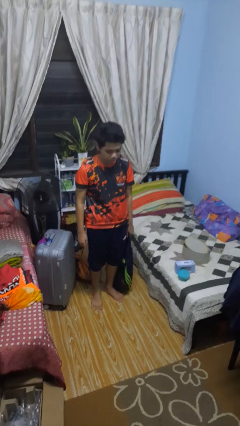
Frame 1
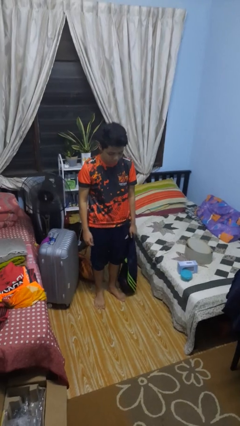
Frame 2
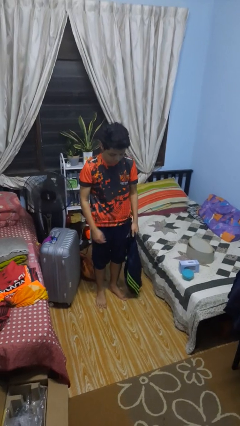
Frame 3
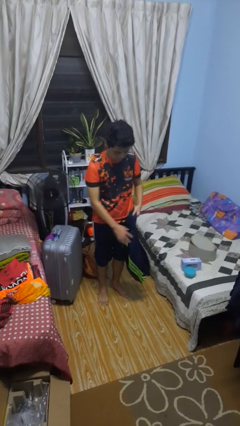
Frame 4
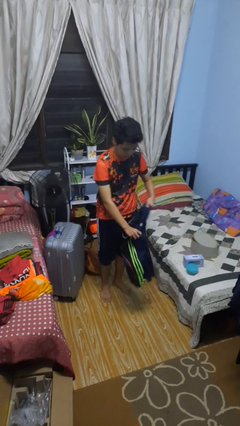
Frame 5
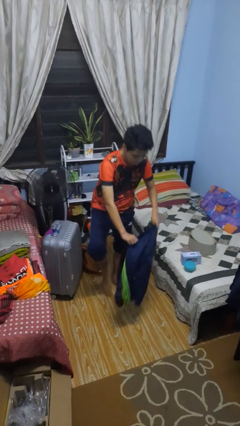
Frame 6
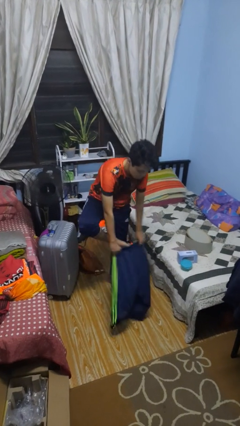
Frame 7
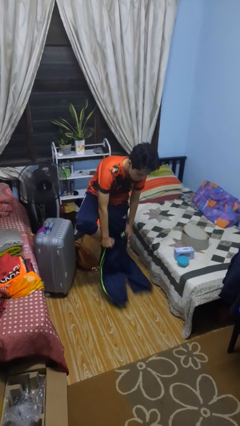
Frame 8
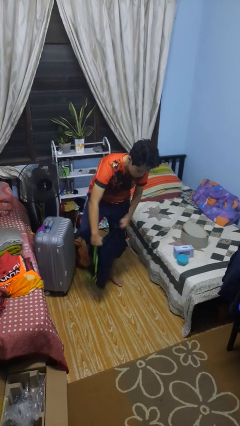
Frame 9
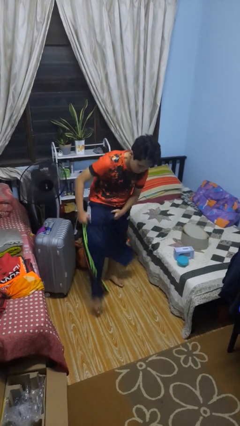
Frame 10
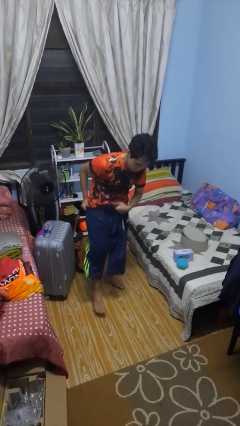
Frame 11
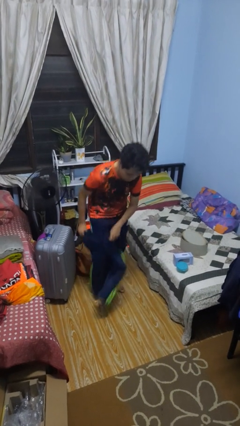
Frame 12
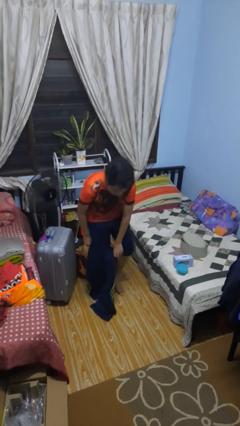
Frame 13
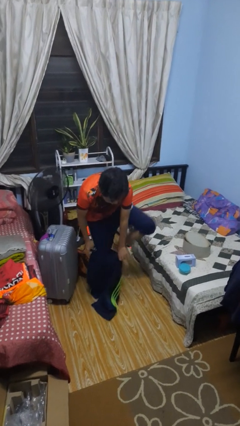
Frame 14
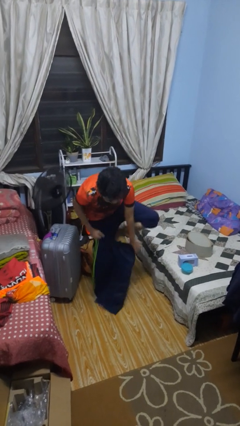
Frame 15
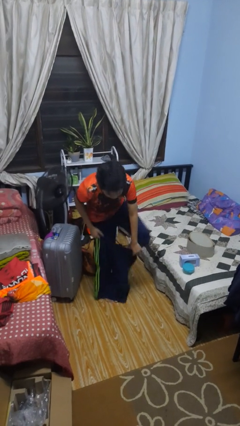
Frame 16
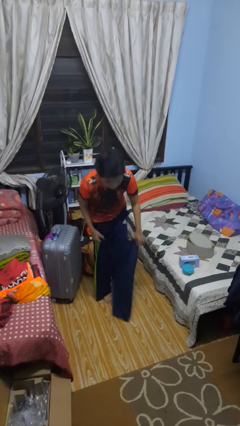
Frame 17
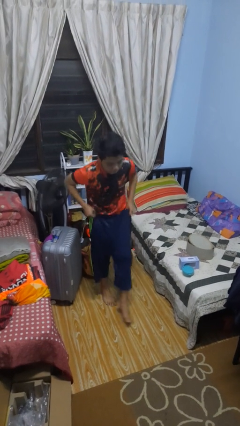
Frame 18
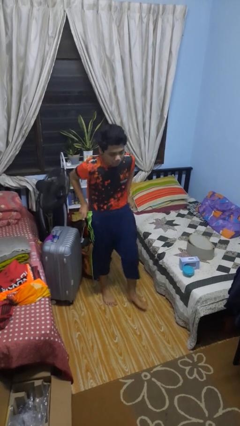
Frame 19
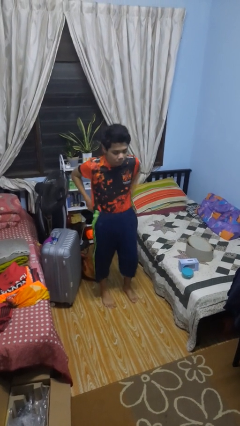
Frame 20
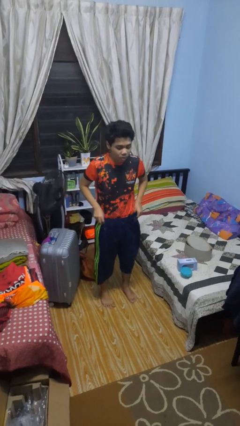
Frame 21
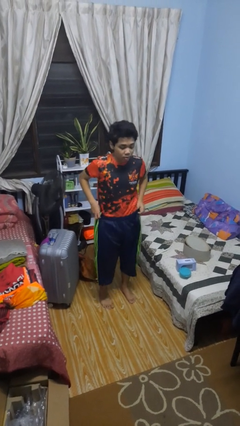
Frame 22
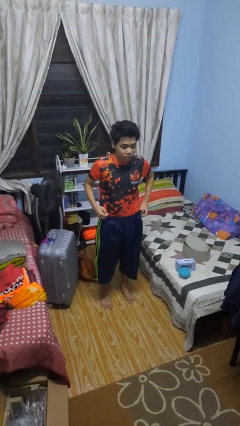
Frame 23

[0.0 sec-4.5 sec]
person puts on pants

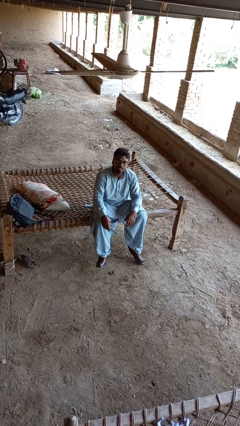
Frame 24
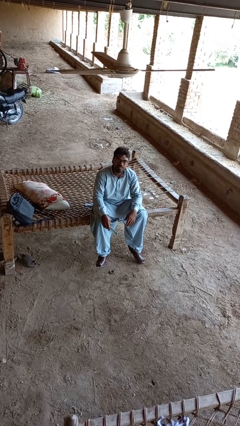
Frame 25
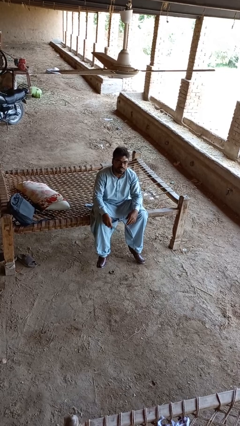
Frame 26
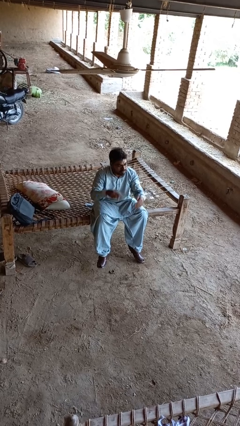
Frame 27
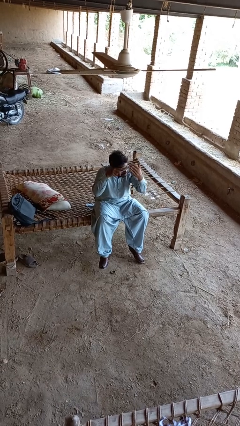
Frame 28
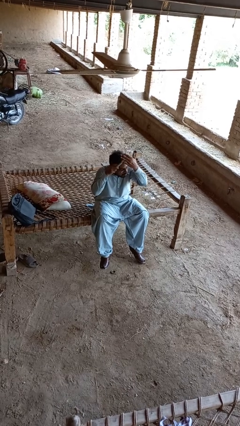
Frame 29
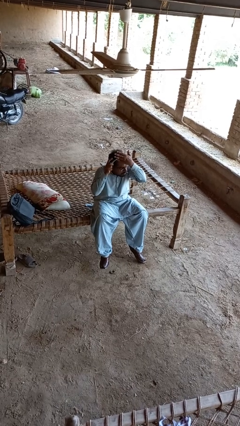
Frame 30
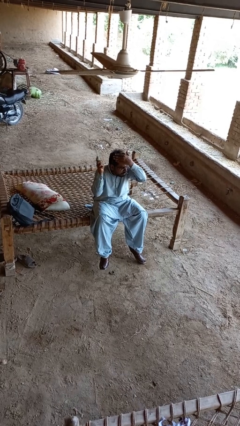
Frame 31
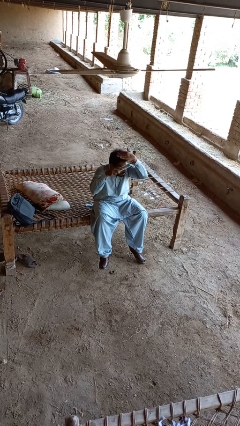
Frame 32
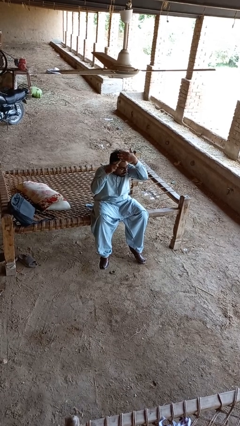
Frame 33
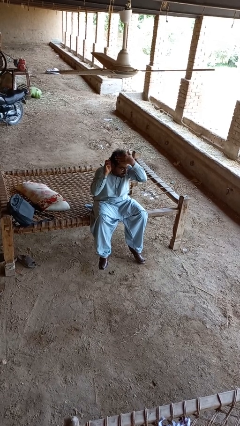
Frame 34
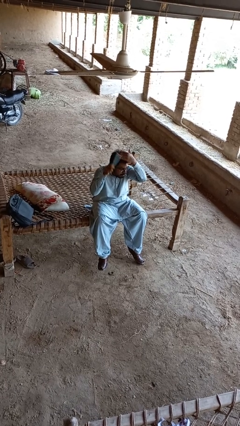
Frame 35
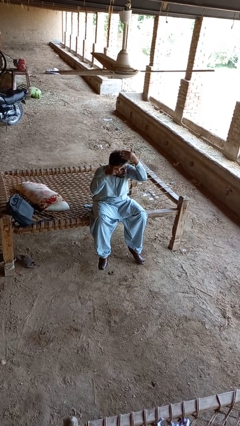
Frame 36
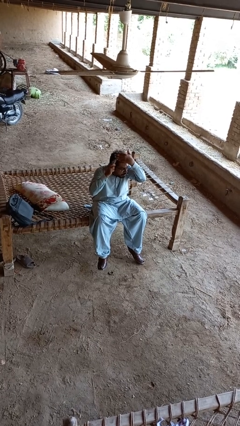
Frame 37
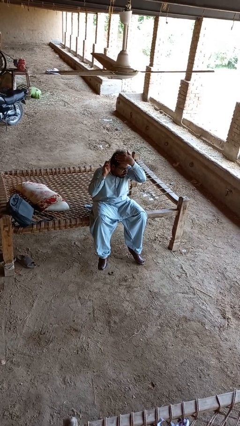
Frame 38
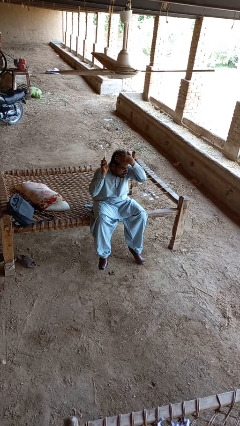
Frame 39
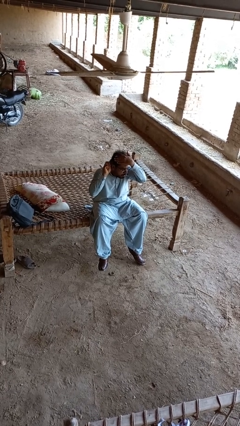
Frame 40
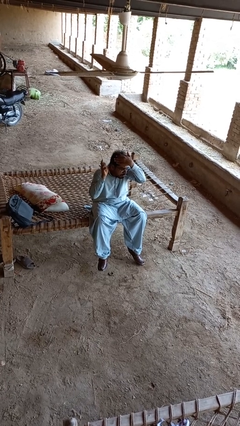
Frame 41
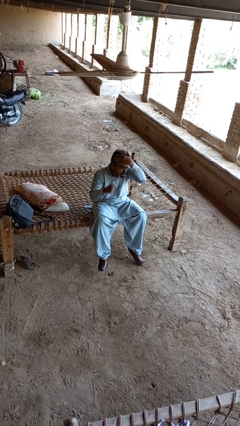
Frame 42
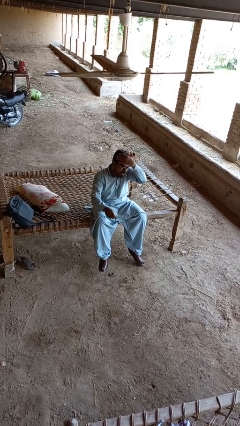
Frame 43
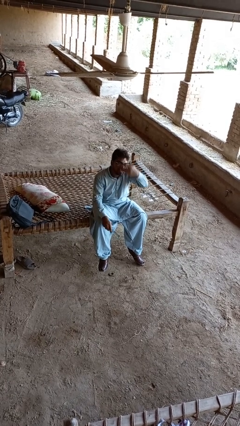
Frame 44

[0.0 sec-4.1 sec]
person brushes hair

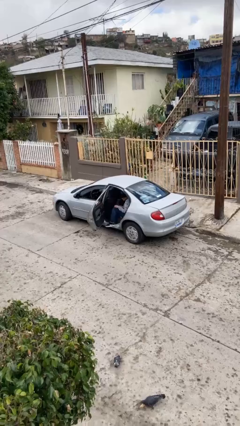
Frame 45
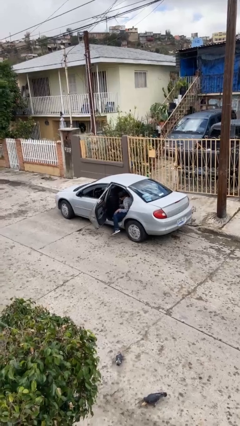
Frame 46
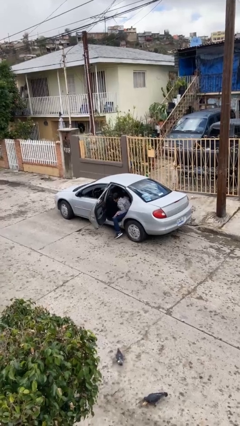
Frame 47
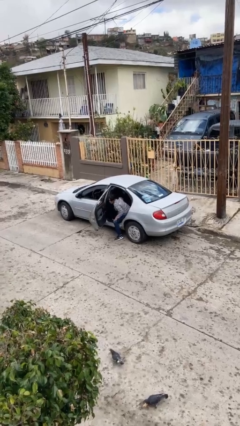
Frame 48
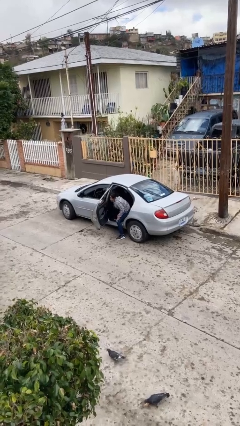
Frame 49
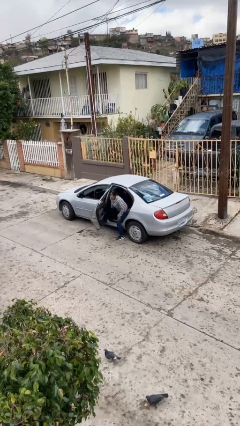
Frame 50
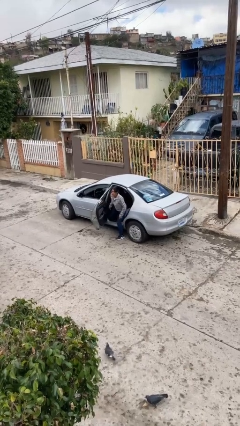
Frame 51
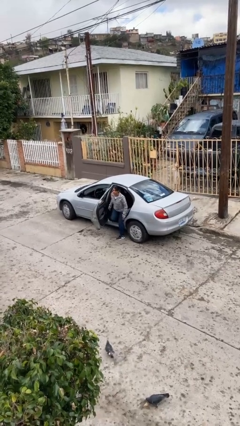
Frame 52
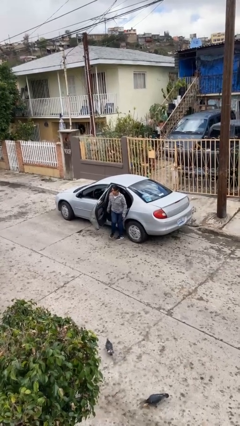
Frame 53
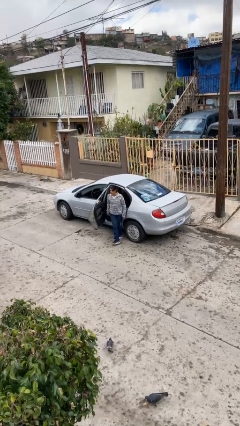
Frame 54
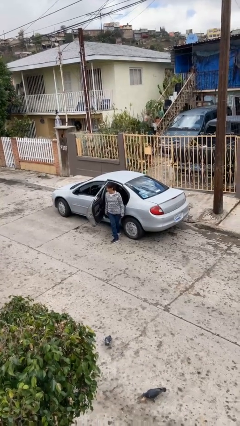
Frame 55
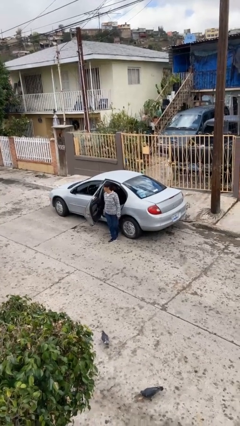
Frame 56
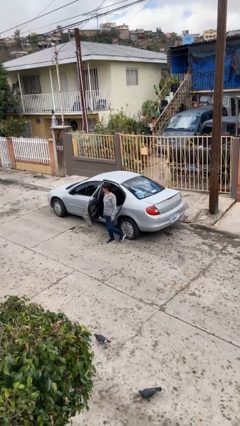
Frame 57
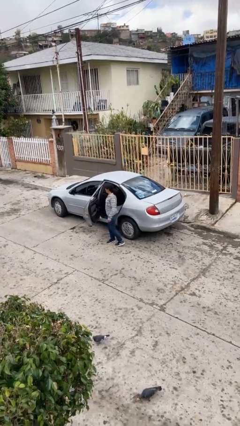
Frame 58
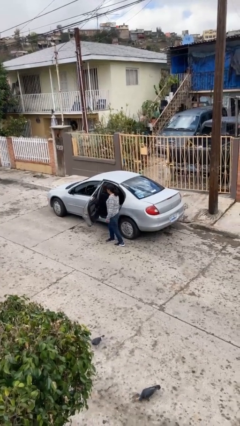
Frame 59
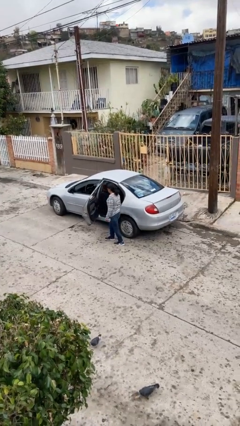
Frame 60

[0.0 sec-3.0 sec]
person exits car

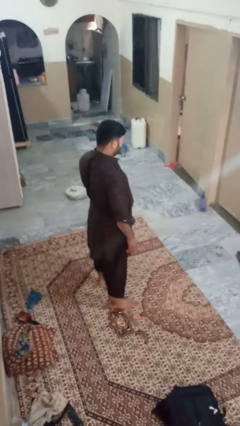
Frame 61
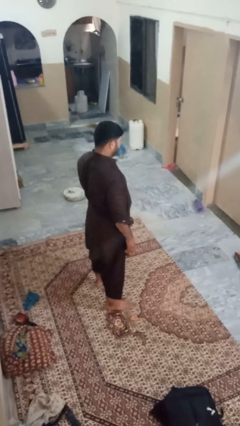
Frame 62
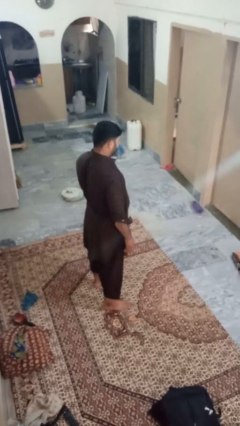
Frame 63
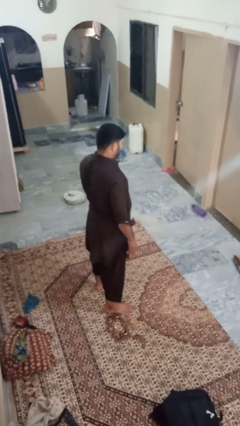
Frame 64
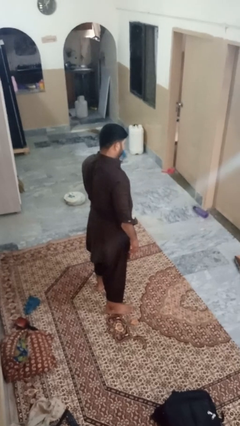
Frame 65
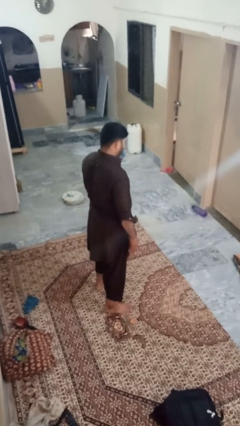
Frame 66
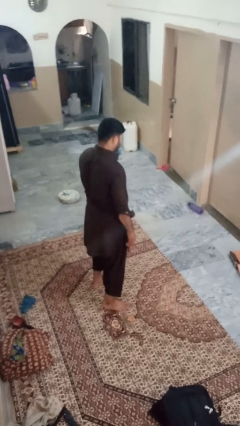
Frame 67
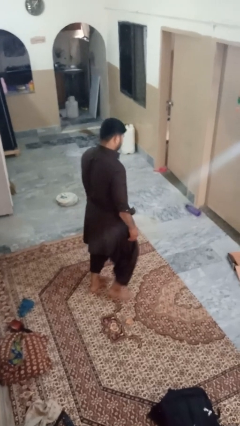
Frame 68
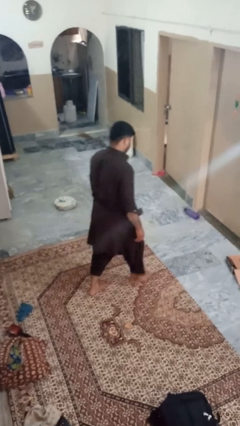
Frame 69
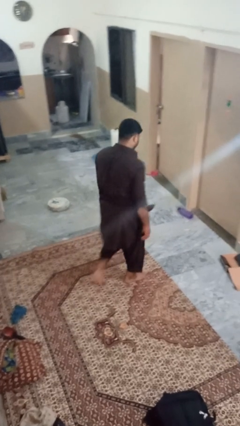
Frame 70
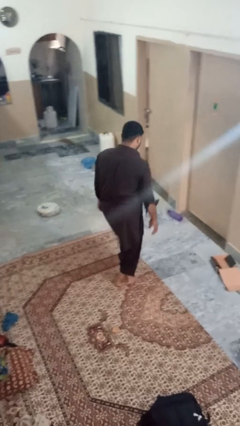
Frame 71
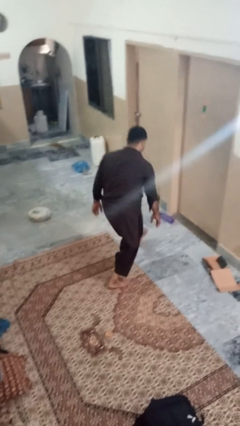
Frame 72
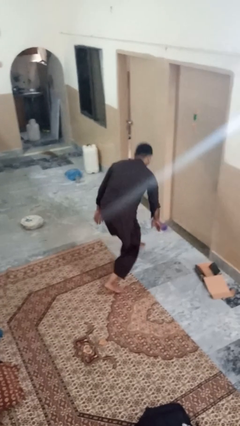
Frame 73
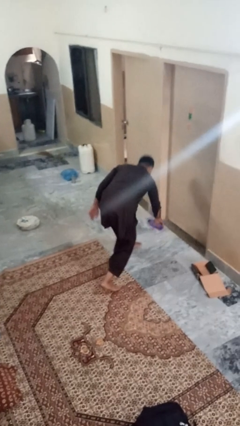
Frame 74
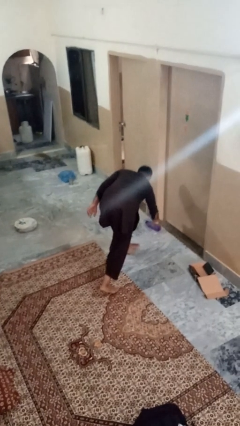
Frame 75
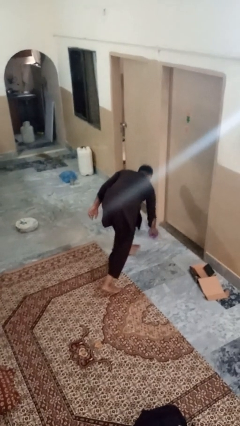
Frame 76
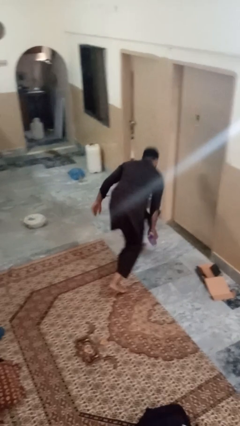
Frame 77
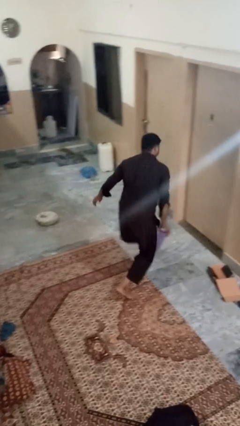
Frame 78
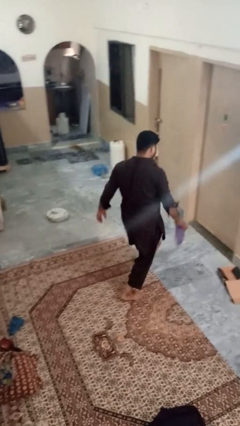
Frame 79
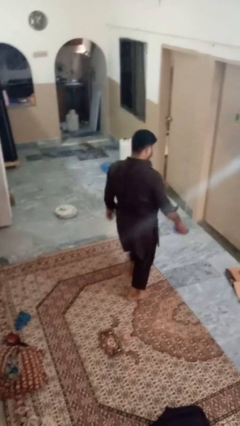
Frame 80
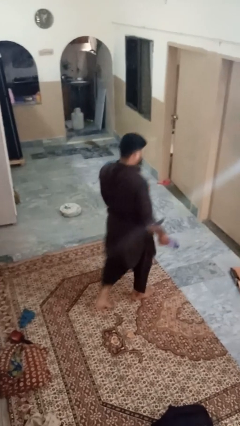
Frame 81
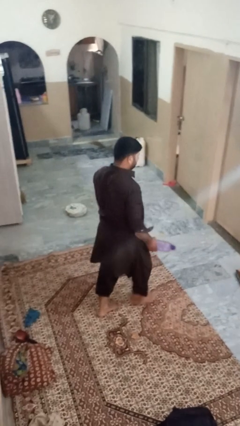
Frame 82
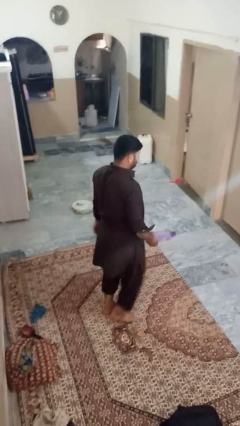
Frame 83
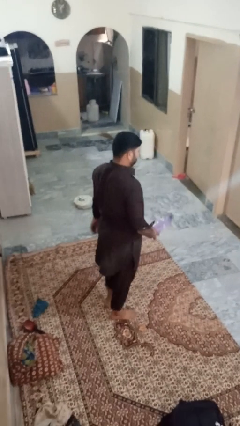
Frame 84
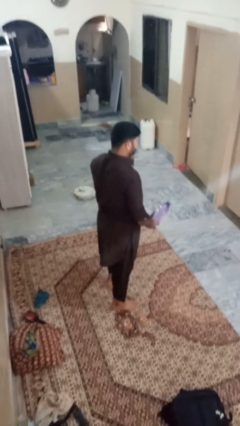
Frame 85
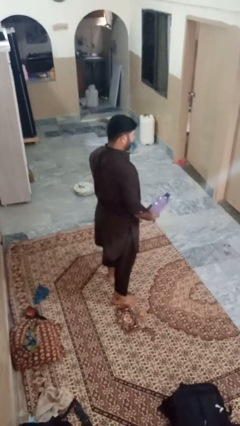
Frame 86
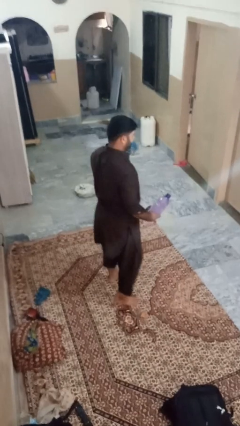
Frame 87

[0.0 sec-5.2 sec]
person picks up object from floor

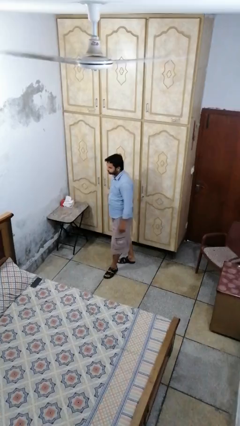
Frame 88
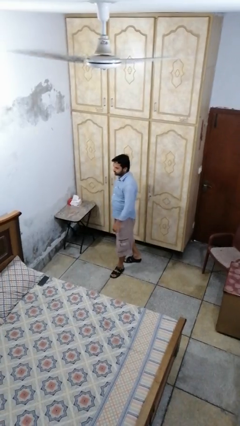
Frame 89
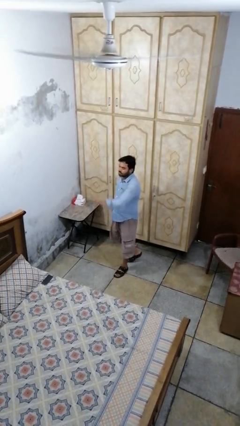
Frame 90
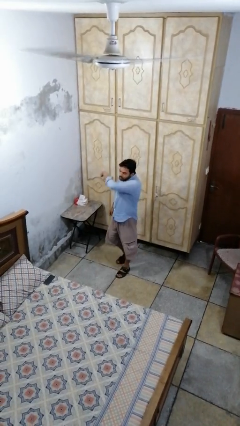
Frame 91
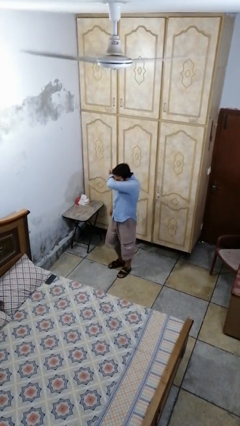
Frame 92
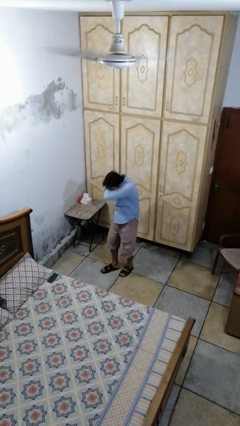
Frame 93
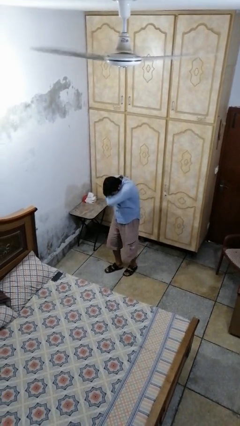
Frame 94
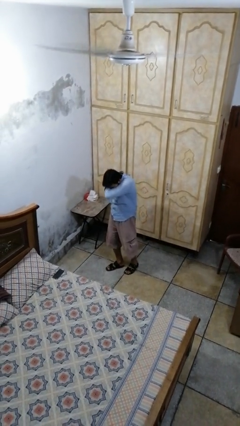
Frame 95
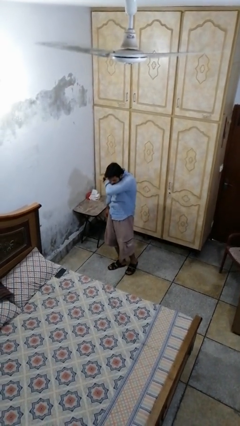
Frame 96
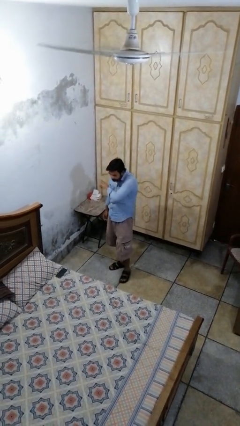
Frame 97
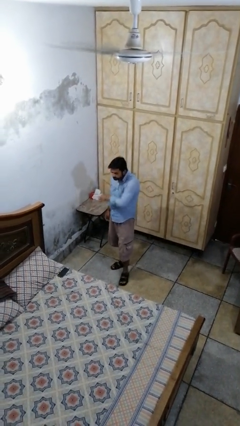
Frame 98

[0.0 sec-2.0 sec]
person sneezes into arm
